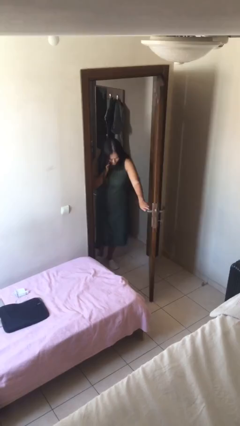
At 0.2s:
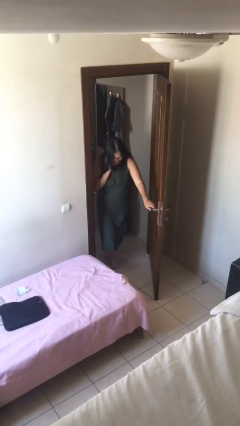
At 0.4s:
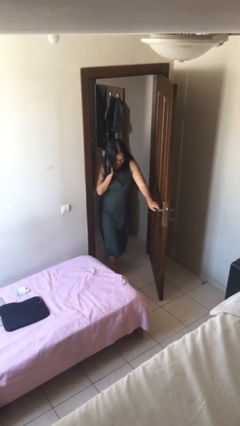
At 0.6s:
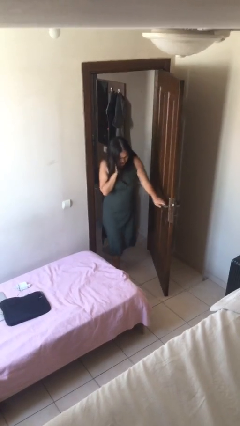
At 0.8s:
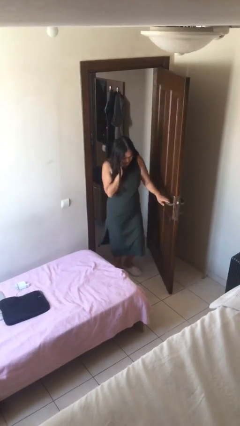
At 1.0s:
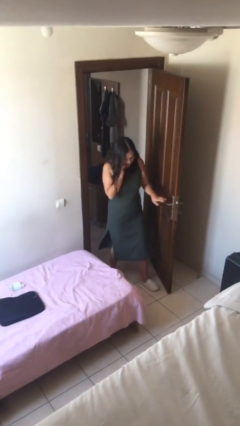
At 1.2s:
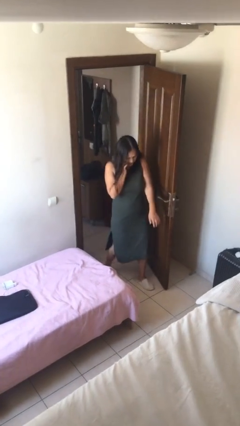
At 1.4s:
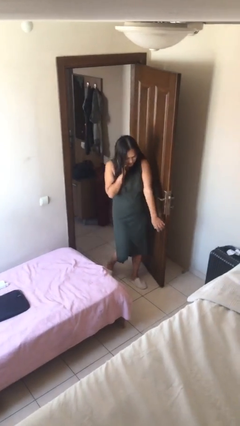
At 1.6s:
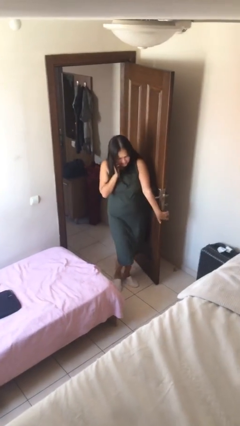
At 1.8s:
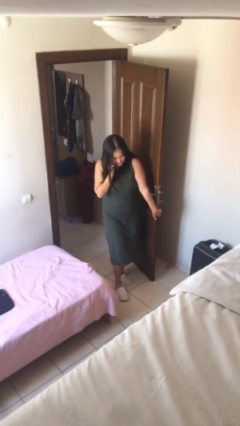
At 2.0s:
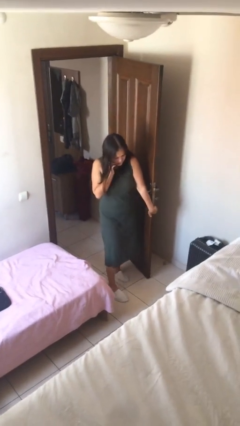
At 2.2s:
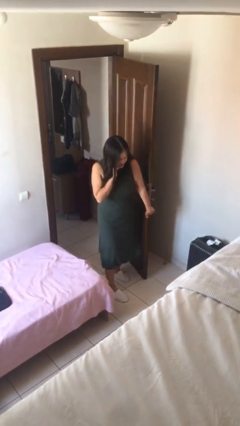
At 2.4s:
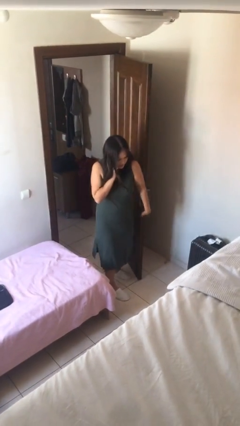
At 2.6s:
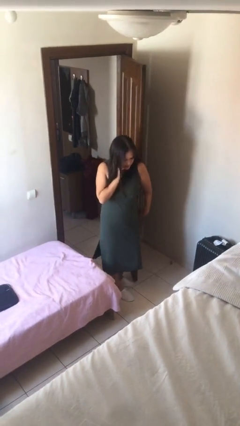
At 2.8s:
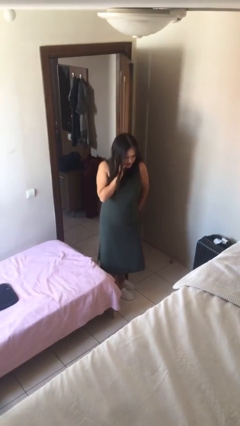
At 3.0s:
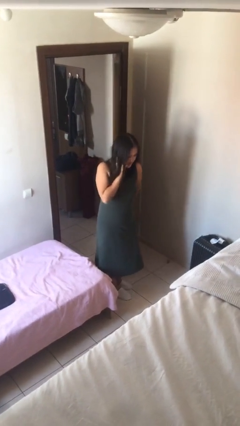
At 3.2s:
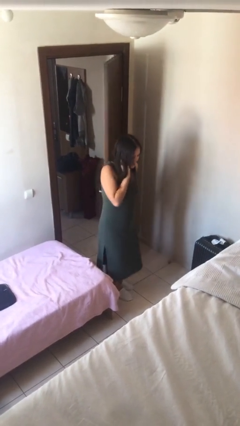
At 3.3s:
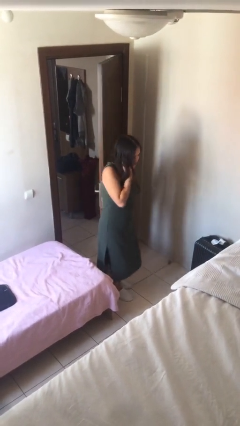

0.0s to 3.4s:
person enters scene through structure

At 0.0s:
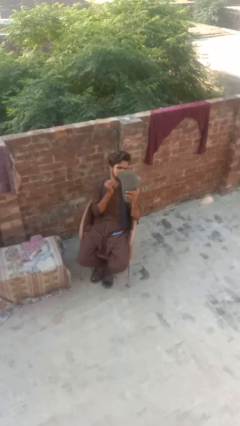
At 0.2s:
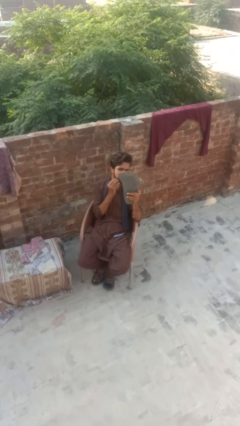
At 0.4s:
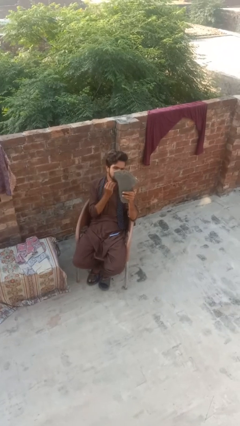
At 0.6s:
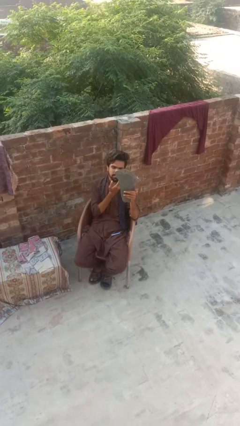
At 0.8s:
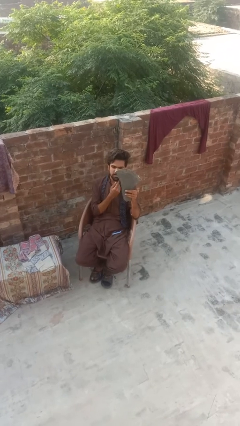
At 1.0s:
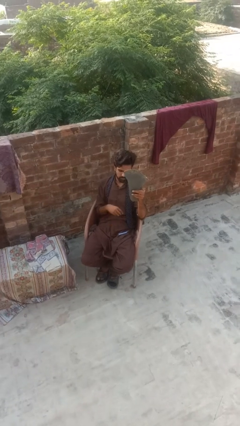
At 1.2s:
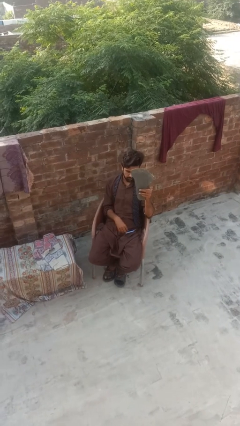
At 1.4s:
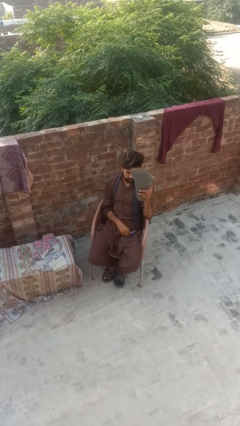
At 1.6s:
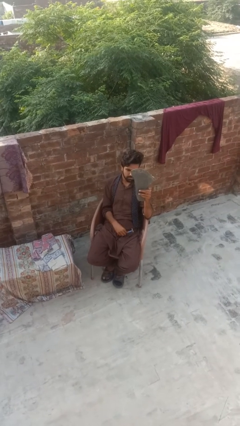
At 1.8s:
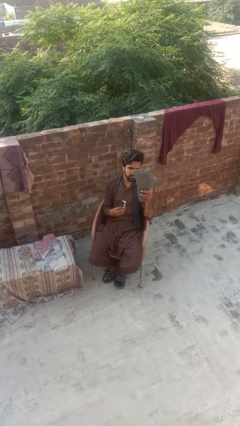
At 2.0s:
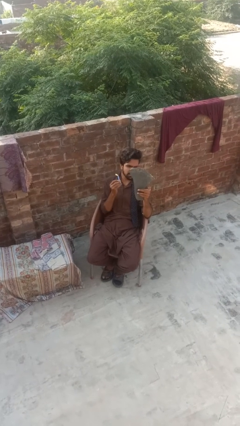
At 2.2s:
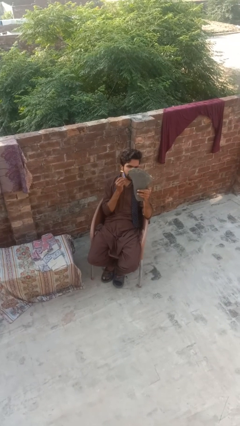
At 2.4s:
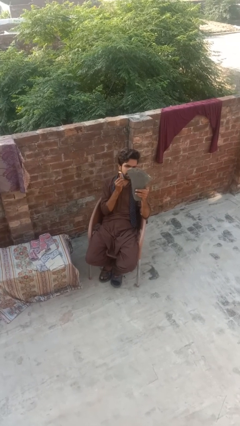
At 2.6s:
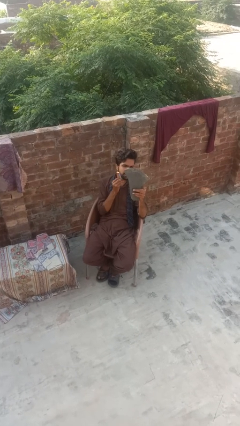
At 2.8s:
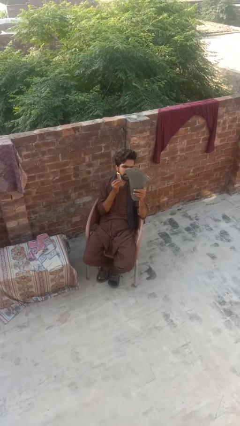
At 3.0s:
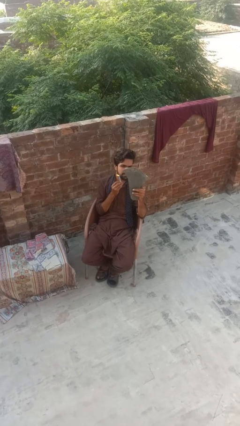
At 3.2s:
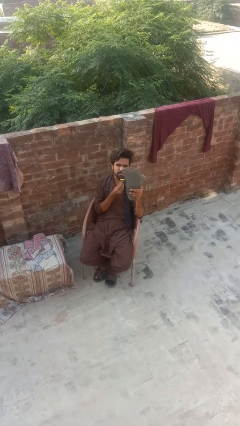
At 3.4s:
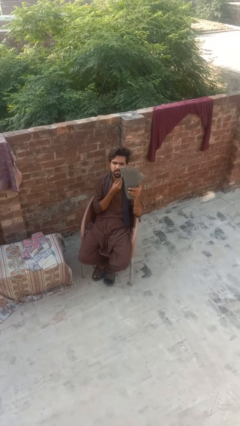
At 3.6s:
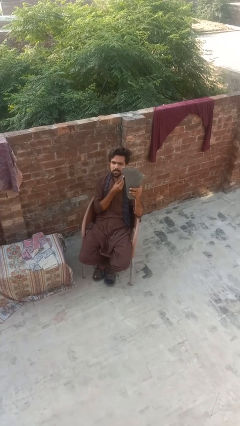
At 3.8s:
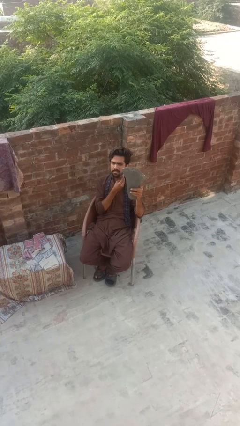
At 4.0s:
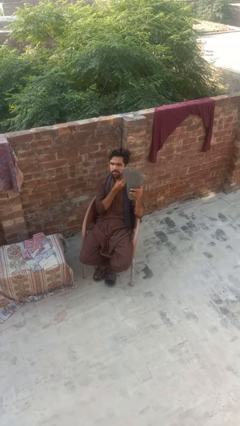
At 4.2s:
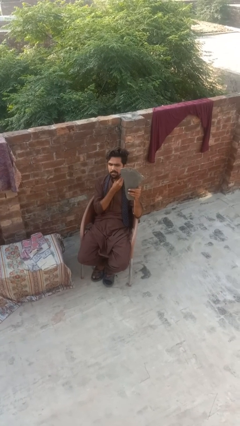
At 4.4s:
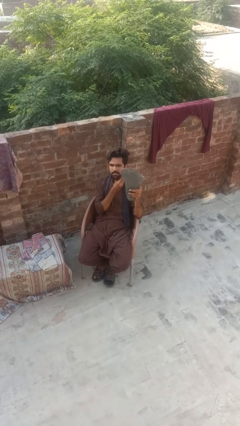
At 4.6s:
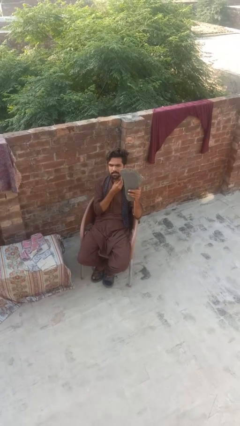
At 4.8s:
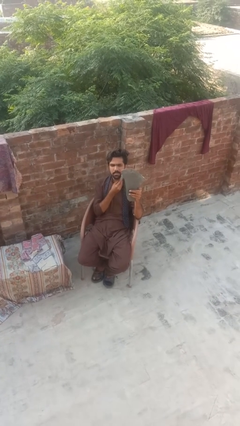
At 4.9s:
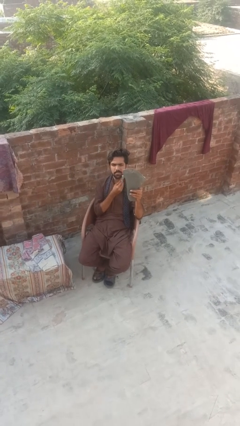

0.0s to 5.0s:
person shaves face

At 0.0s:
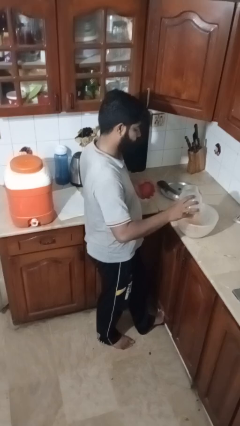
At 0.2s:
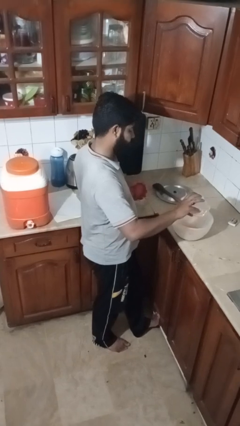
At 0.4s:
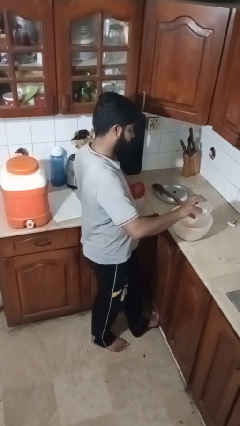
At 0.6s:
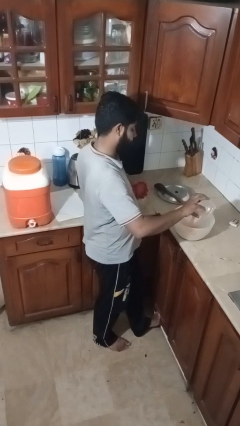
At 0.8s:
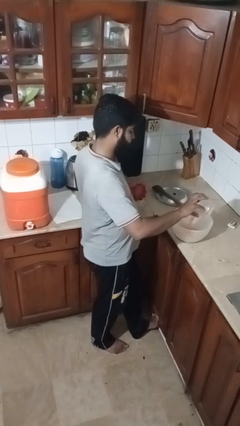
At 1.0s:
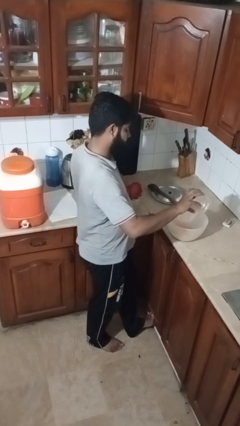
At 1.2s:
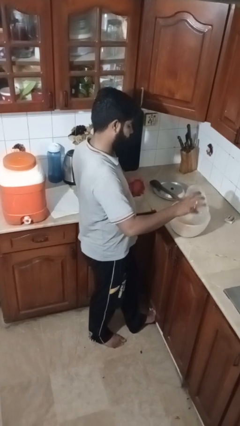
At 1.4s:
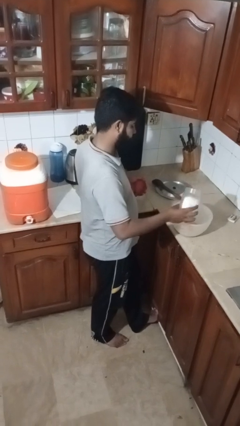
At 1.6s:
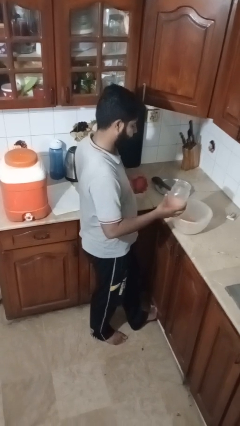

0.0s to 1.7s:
person pours into bowl

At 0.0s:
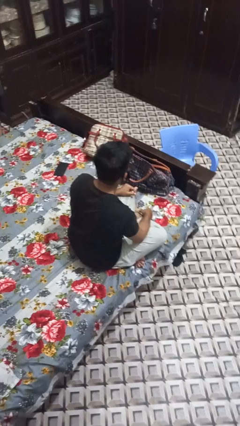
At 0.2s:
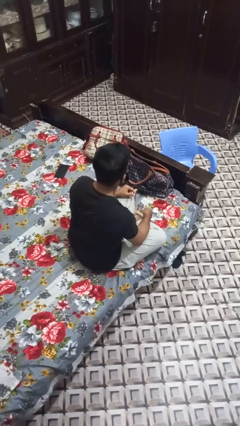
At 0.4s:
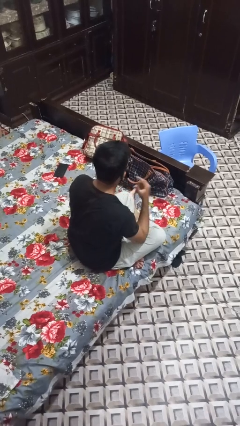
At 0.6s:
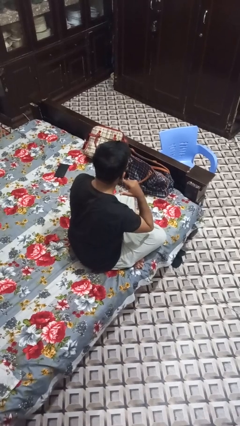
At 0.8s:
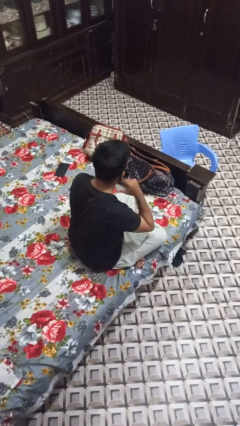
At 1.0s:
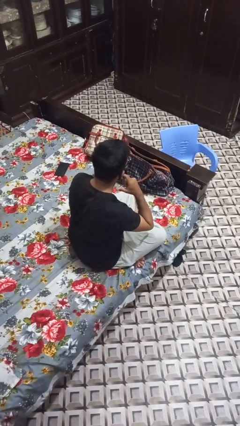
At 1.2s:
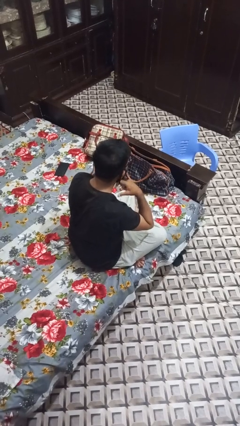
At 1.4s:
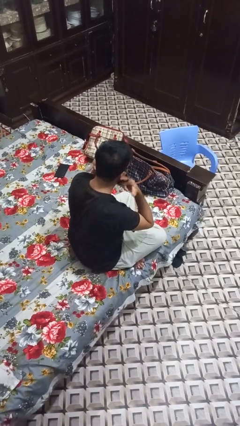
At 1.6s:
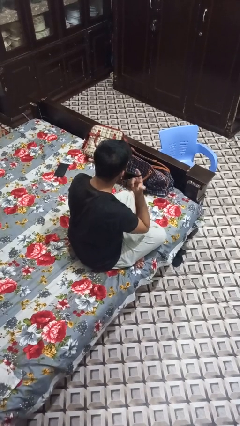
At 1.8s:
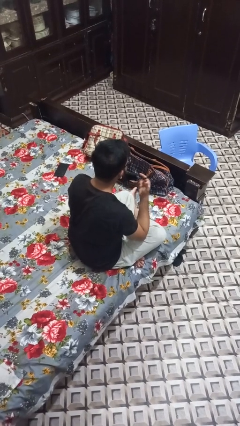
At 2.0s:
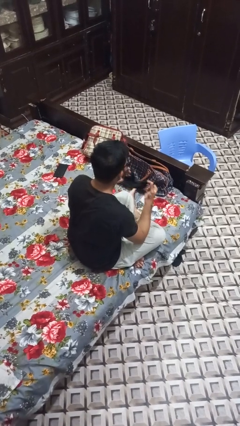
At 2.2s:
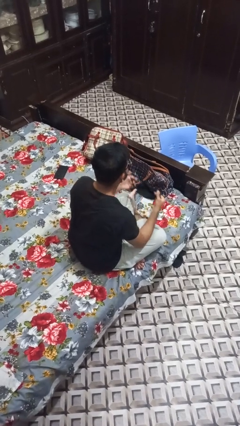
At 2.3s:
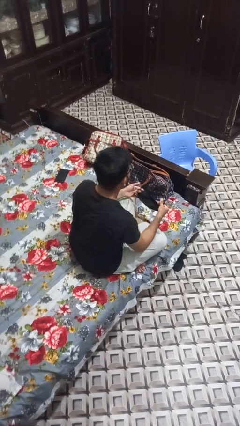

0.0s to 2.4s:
person takes off facemask

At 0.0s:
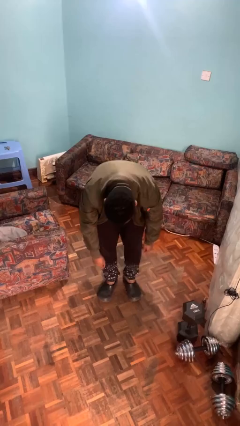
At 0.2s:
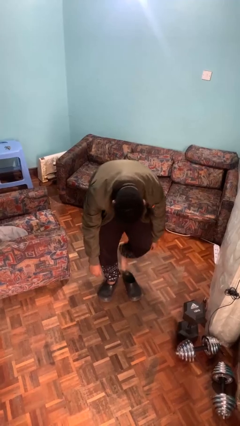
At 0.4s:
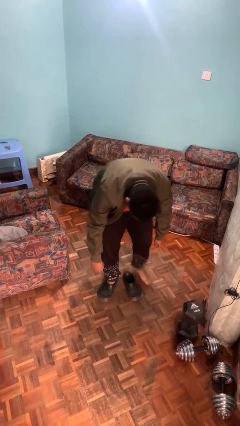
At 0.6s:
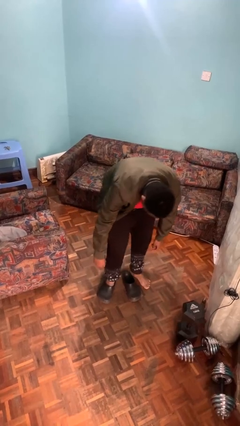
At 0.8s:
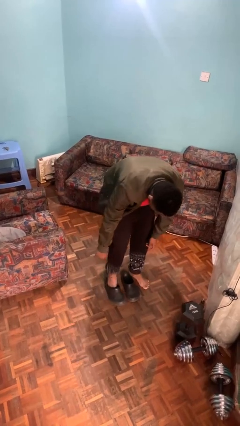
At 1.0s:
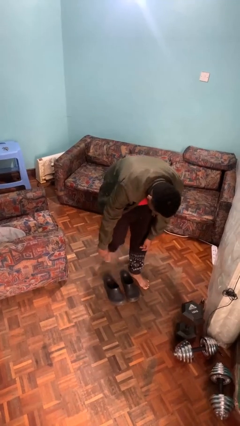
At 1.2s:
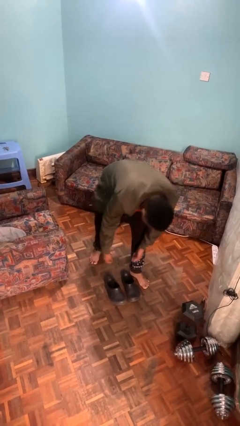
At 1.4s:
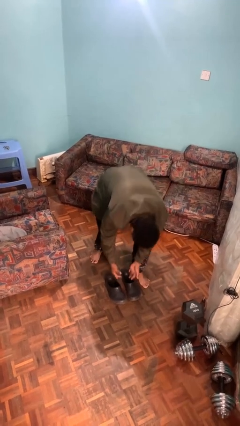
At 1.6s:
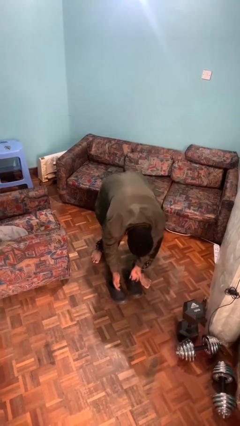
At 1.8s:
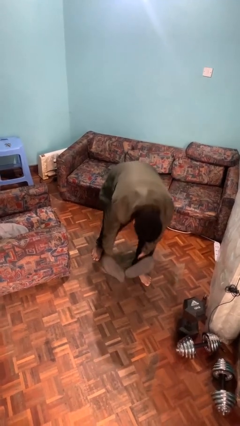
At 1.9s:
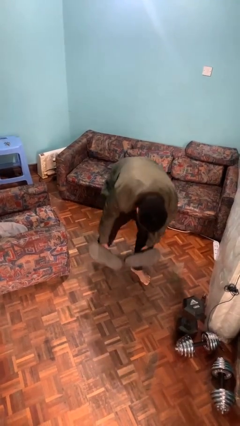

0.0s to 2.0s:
person takes off shoes

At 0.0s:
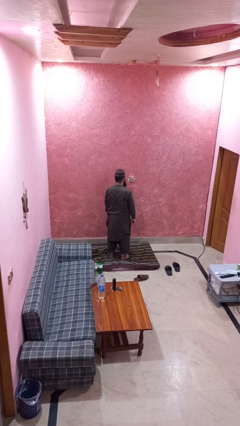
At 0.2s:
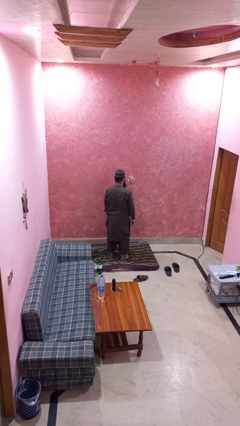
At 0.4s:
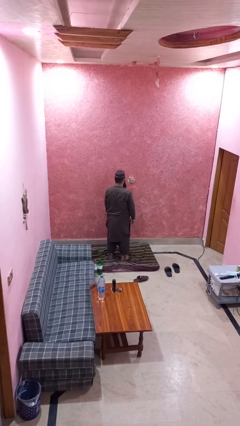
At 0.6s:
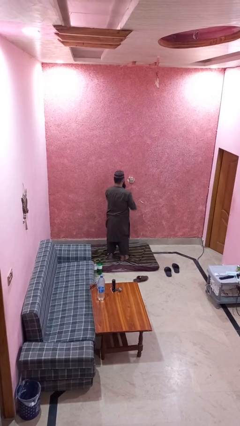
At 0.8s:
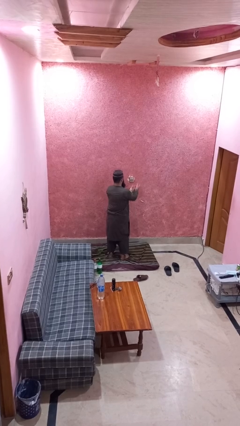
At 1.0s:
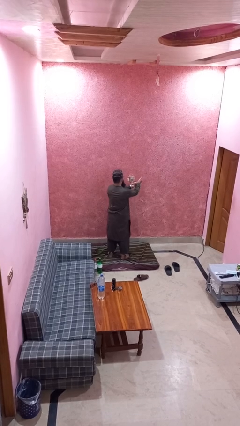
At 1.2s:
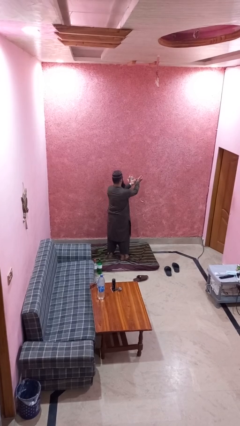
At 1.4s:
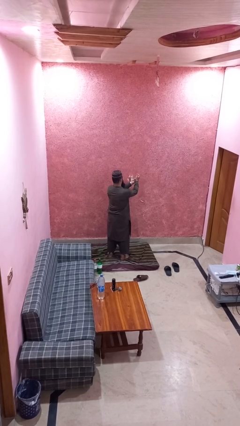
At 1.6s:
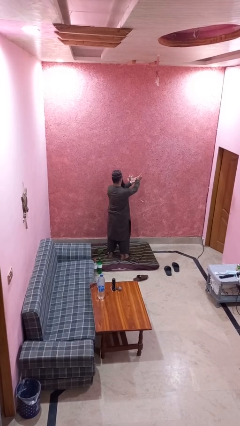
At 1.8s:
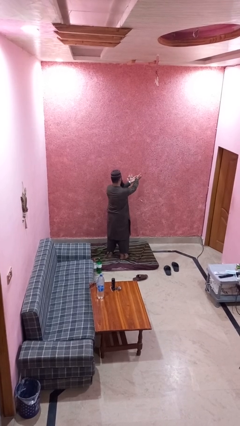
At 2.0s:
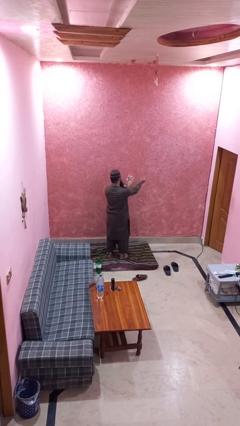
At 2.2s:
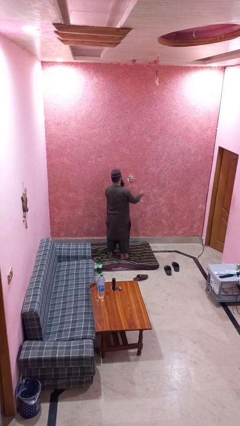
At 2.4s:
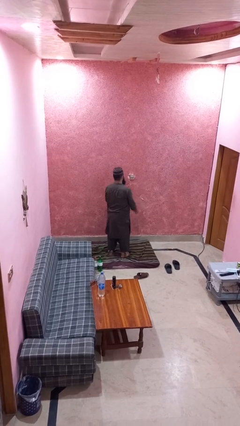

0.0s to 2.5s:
person snaps fingers

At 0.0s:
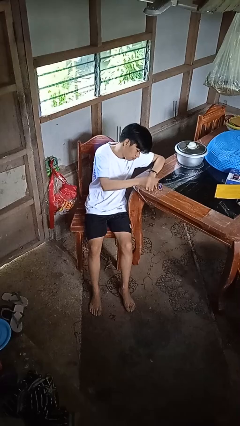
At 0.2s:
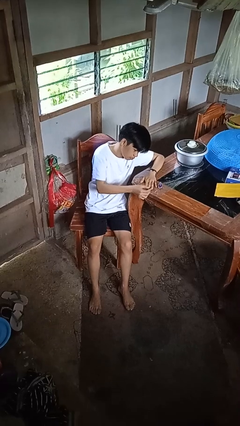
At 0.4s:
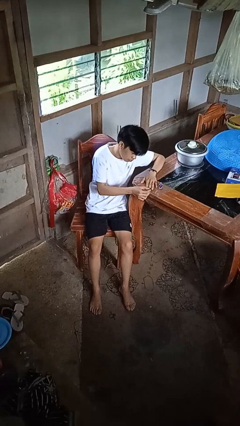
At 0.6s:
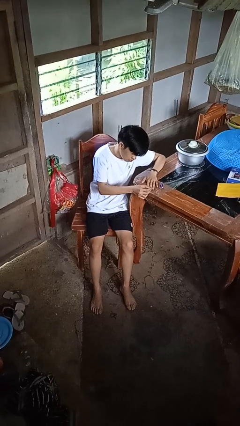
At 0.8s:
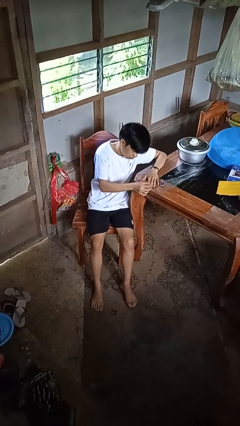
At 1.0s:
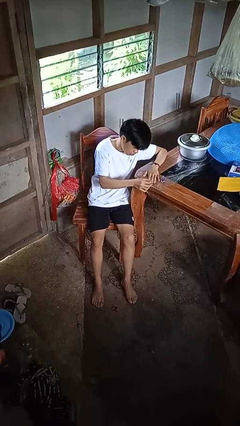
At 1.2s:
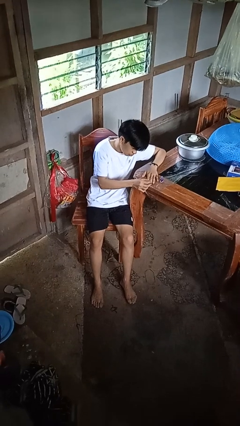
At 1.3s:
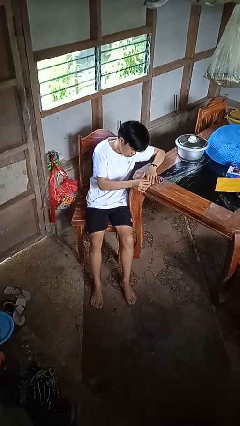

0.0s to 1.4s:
person paints fingernails
